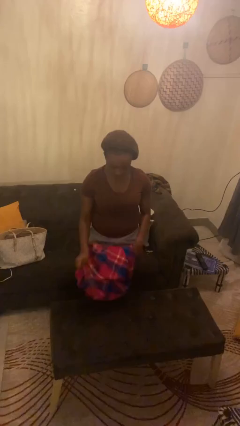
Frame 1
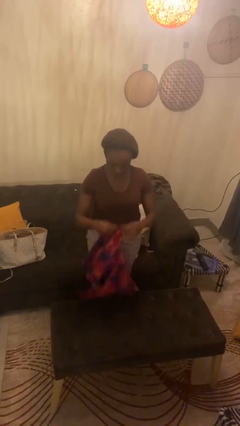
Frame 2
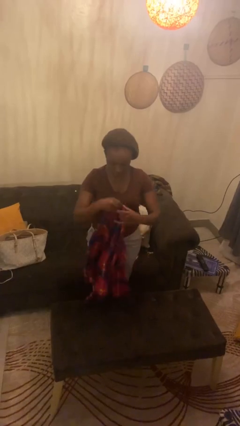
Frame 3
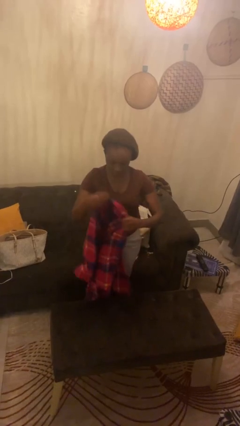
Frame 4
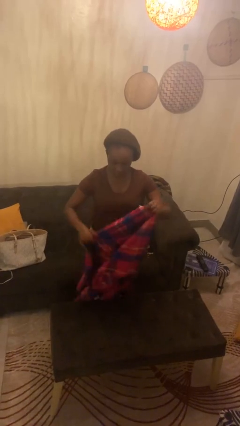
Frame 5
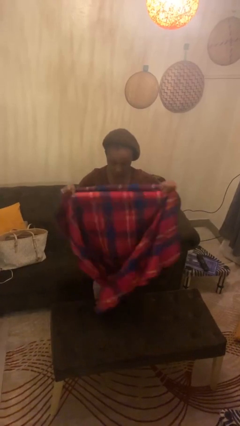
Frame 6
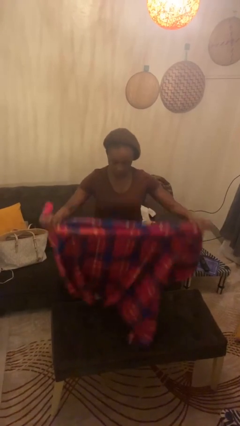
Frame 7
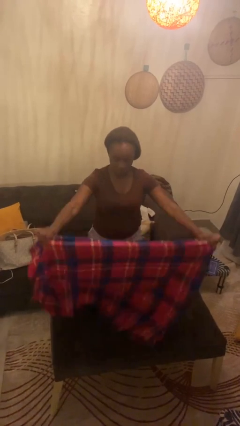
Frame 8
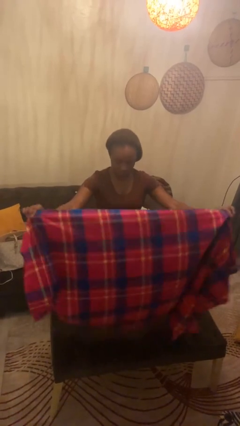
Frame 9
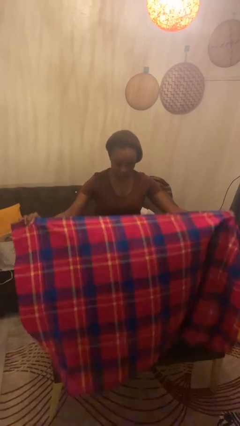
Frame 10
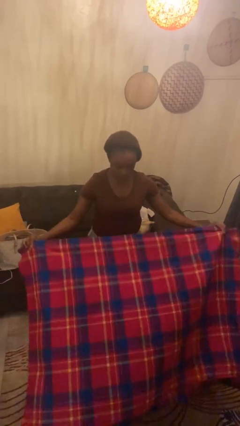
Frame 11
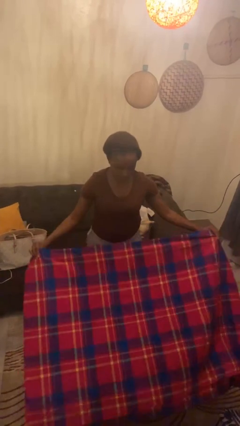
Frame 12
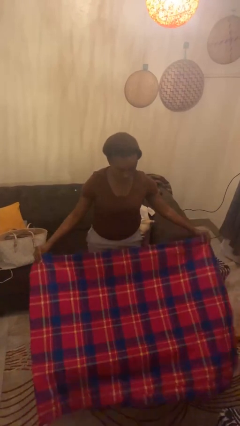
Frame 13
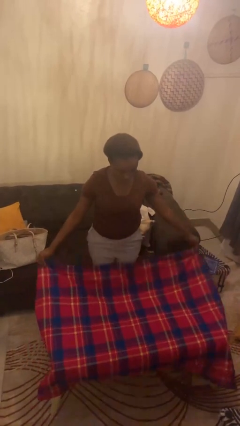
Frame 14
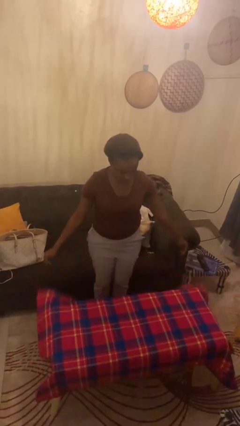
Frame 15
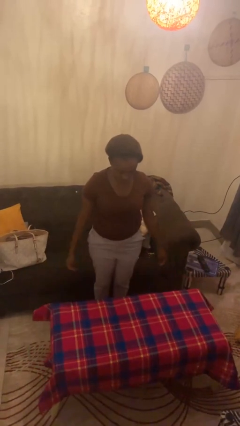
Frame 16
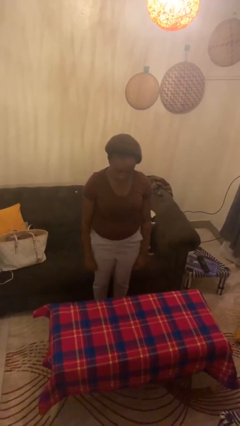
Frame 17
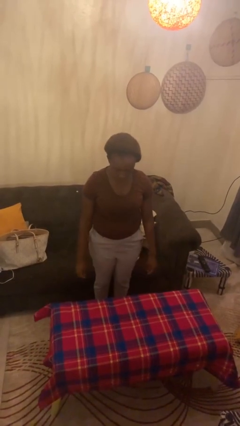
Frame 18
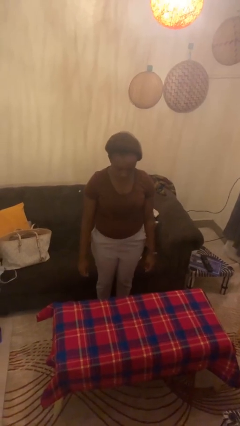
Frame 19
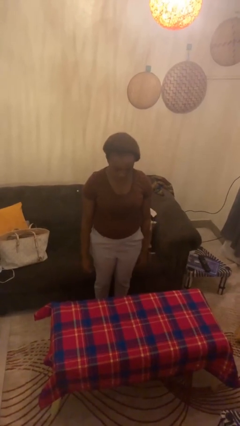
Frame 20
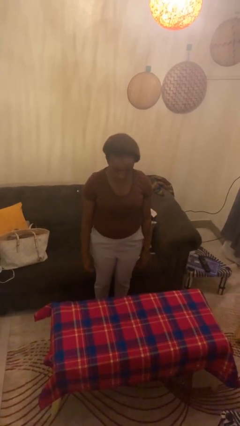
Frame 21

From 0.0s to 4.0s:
person spreads tablecloth

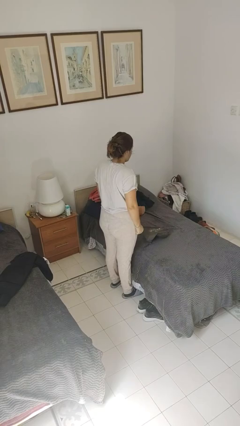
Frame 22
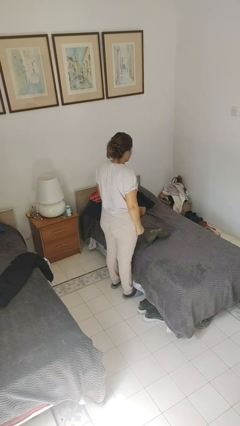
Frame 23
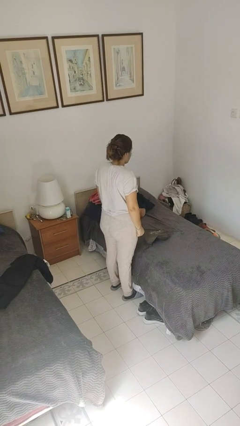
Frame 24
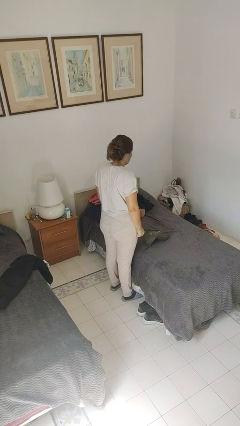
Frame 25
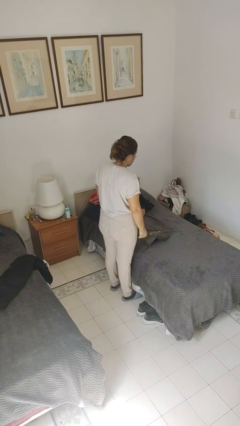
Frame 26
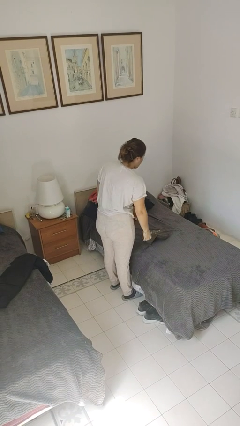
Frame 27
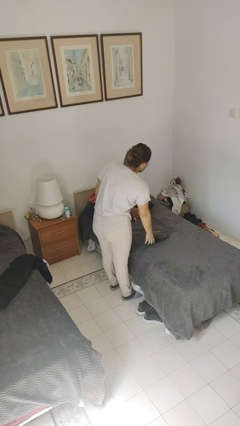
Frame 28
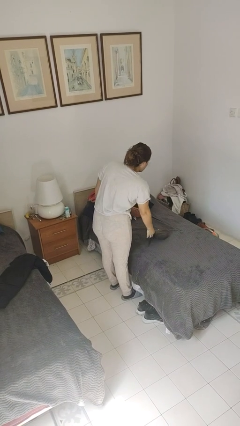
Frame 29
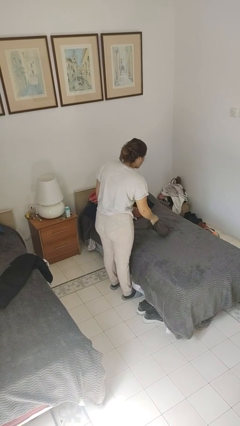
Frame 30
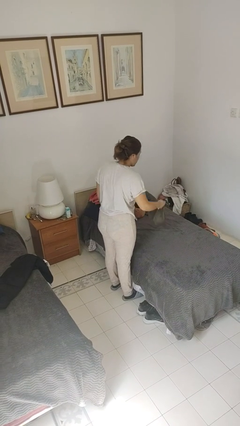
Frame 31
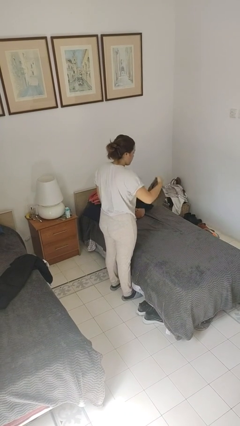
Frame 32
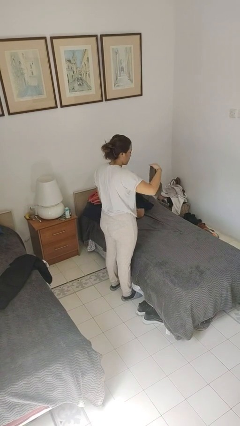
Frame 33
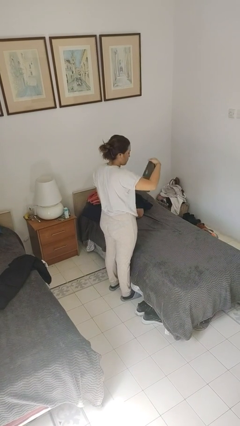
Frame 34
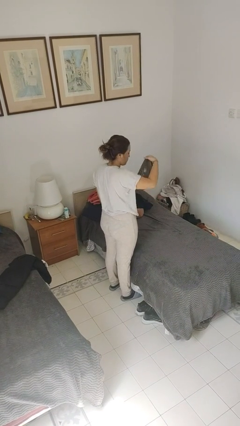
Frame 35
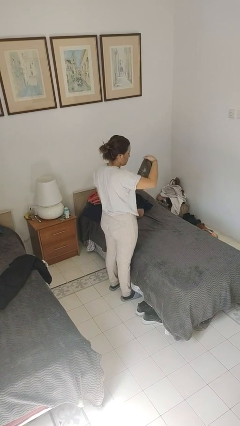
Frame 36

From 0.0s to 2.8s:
person picks up object from bed

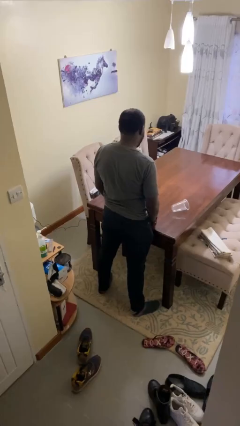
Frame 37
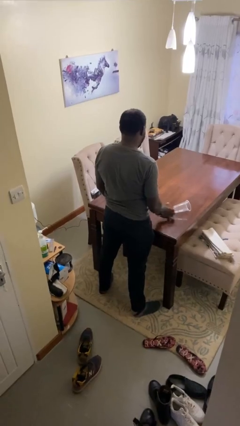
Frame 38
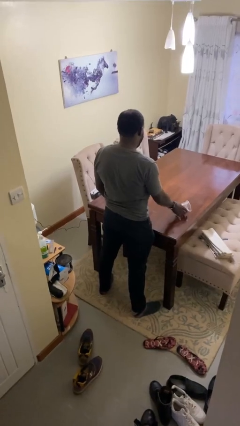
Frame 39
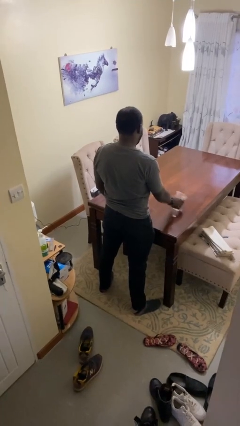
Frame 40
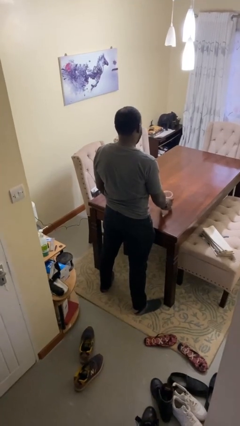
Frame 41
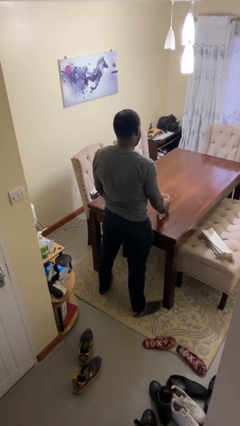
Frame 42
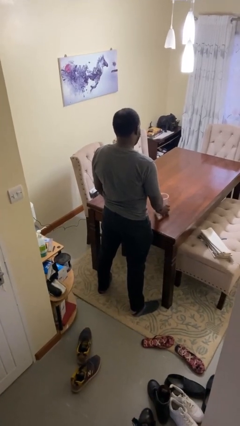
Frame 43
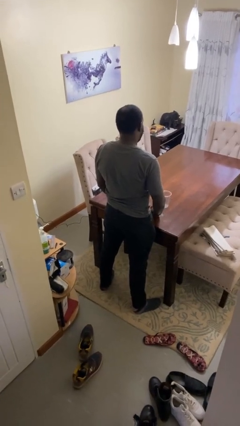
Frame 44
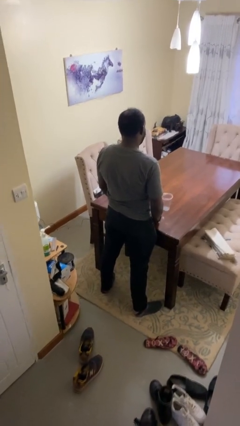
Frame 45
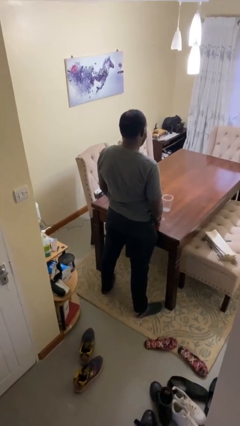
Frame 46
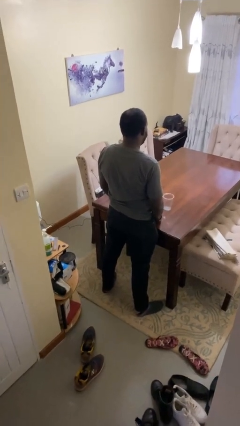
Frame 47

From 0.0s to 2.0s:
person sets upright glass

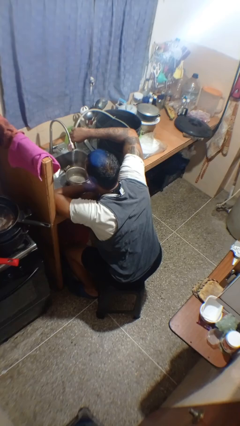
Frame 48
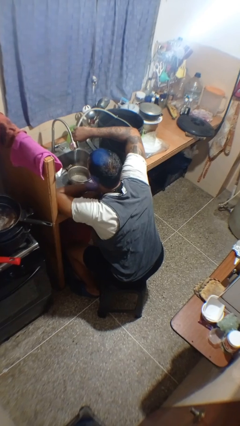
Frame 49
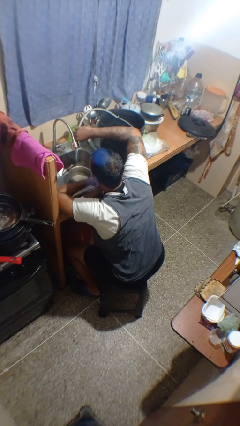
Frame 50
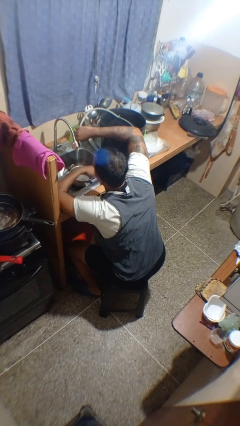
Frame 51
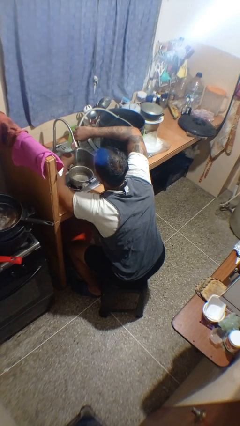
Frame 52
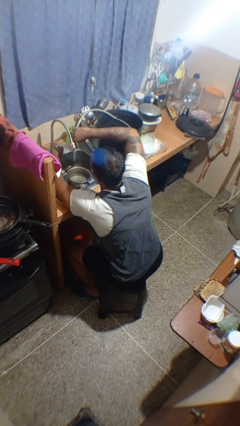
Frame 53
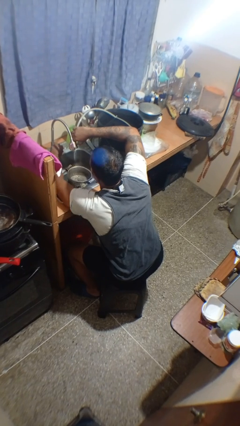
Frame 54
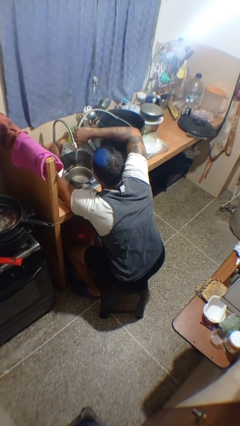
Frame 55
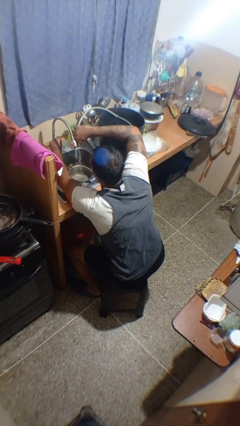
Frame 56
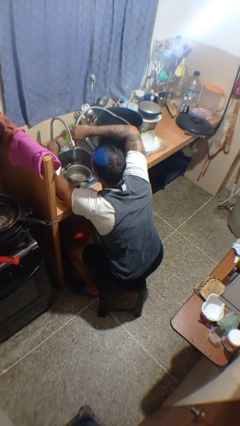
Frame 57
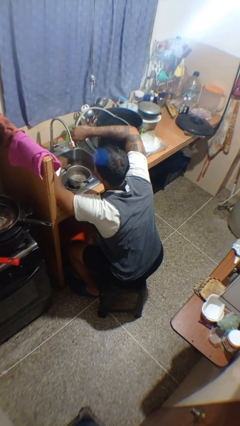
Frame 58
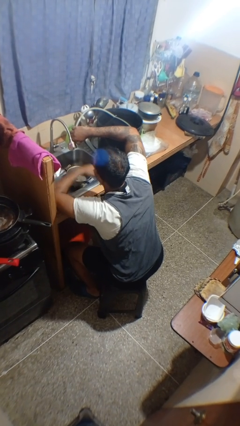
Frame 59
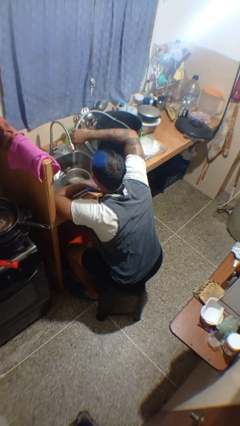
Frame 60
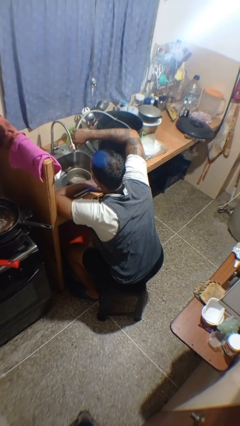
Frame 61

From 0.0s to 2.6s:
person turns off faucet

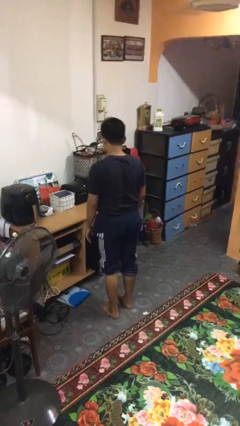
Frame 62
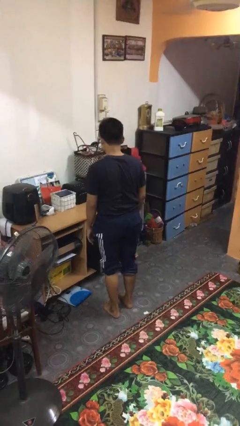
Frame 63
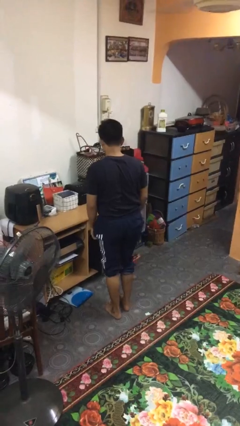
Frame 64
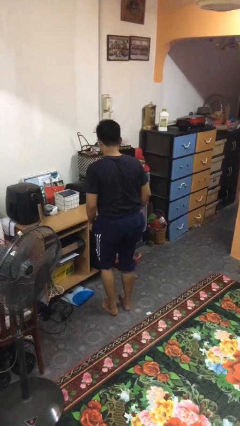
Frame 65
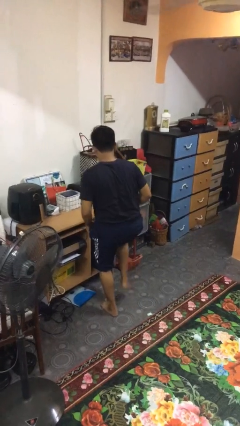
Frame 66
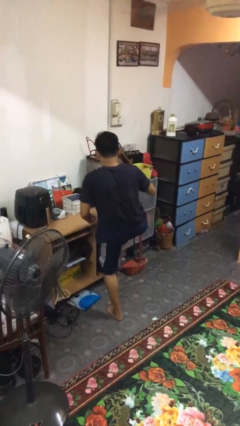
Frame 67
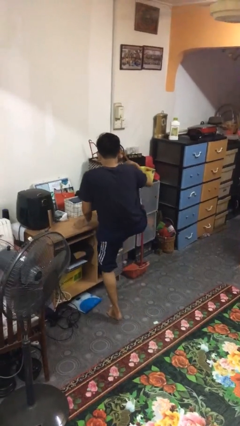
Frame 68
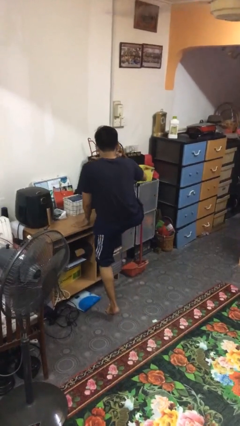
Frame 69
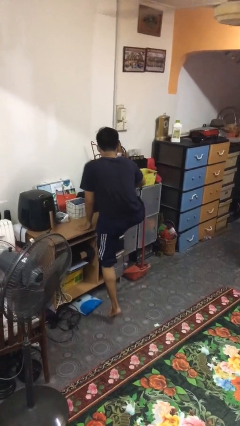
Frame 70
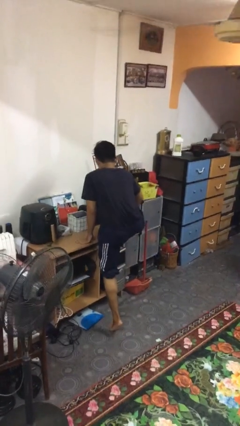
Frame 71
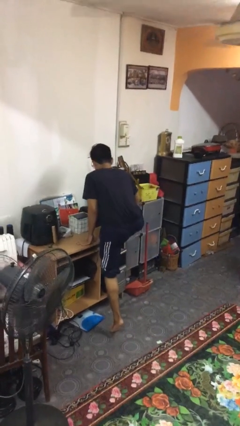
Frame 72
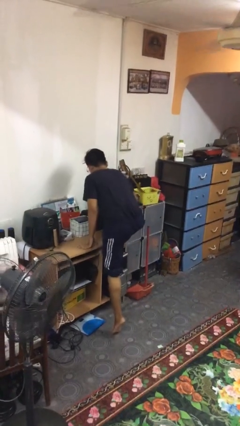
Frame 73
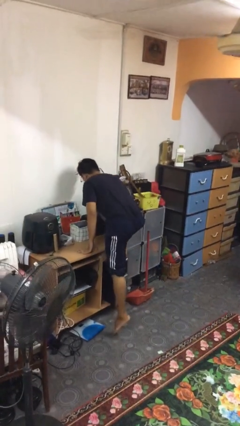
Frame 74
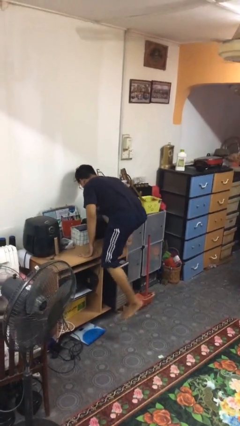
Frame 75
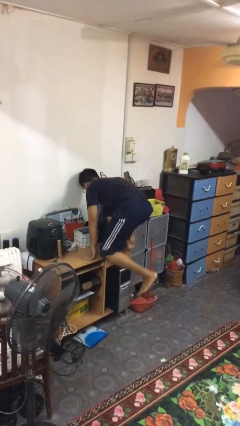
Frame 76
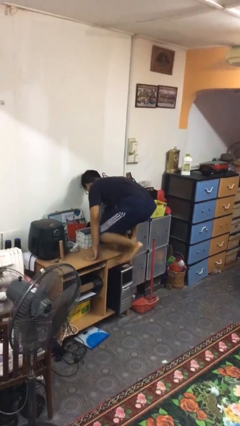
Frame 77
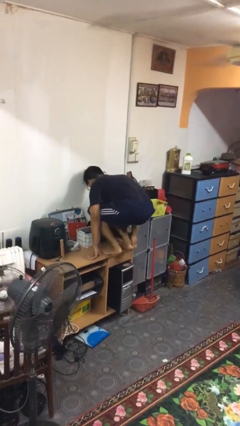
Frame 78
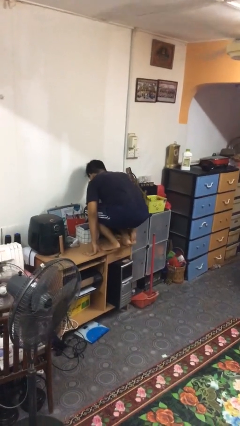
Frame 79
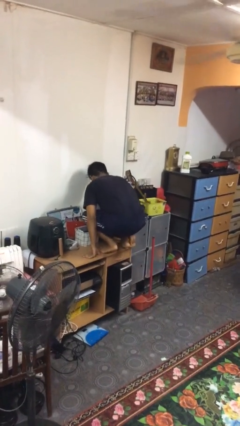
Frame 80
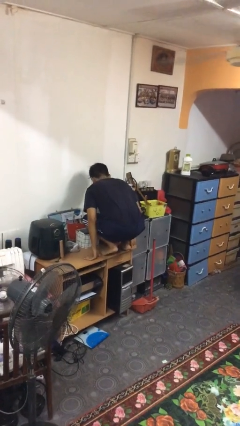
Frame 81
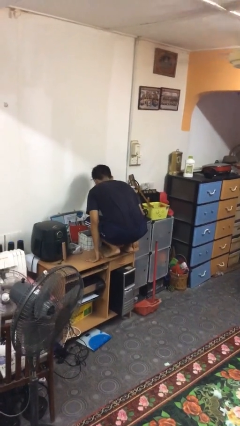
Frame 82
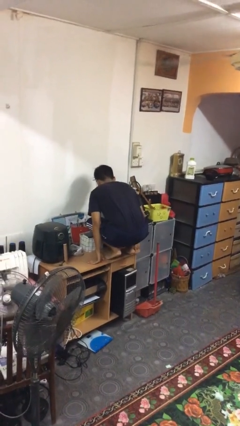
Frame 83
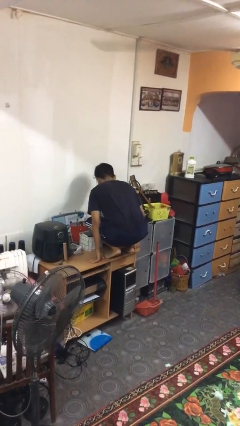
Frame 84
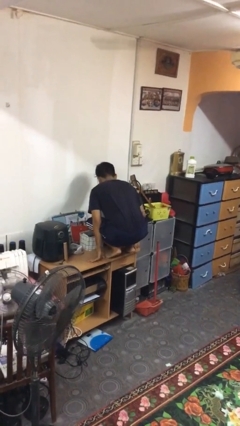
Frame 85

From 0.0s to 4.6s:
person climbs on table

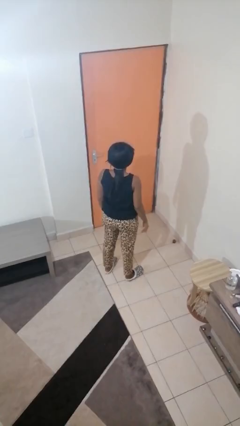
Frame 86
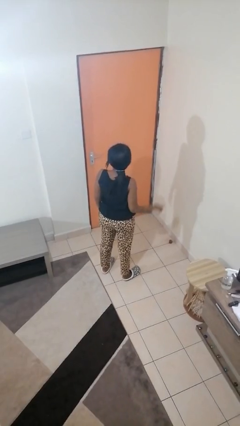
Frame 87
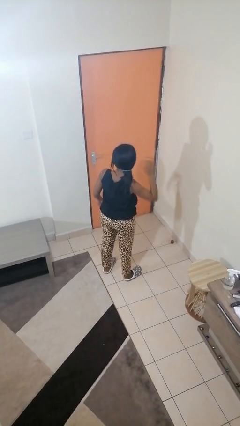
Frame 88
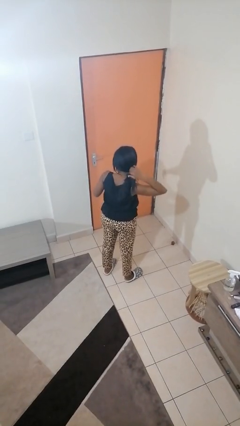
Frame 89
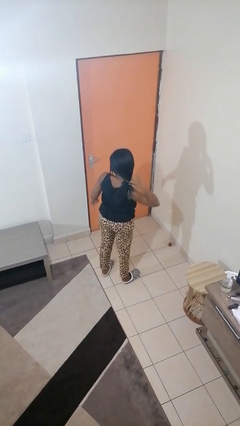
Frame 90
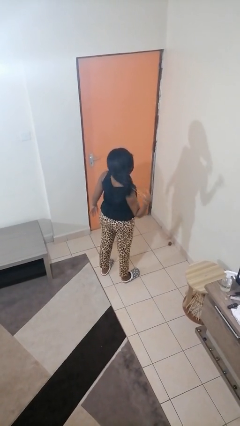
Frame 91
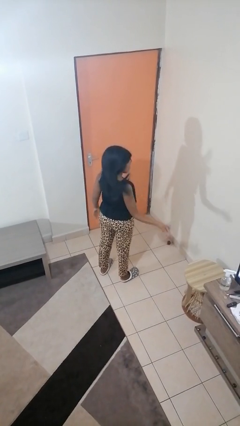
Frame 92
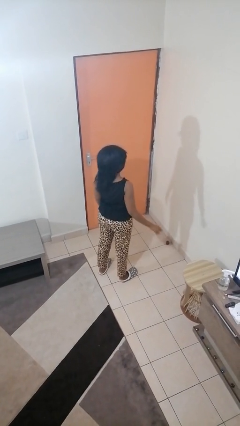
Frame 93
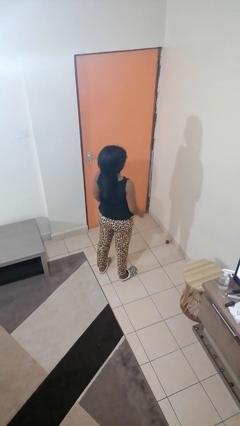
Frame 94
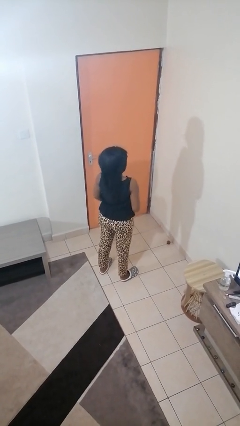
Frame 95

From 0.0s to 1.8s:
person takes off hairtie
